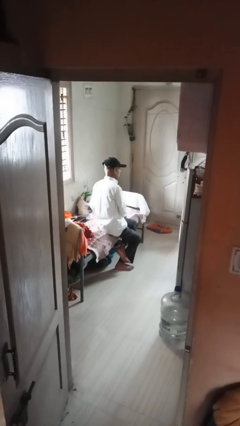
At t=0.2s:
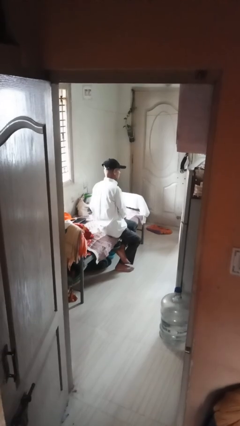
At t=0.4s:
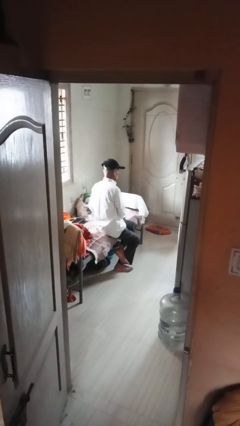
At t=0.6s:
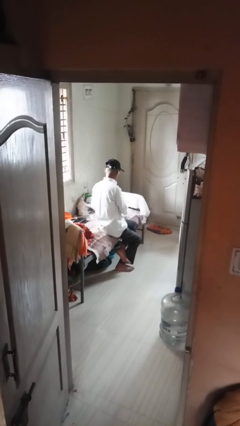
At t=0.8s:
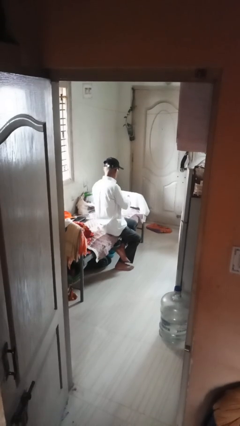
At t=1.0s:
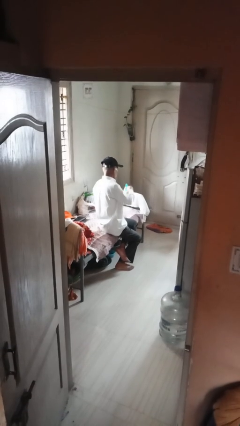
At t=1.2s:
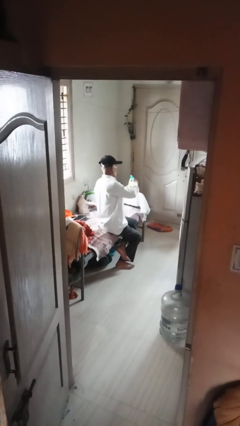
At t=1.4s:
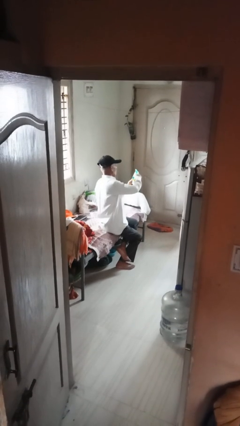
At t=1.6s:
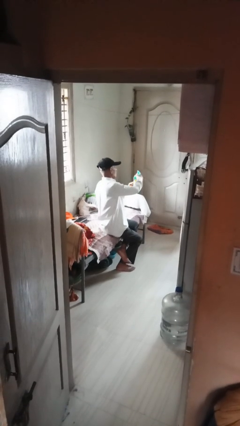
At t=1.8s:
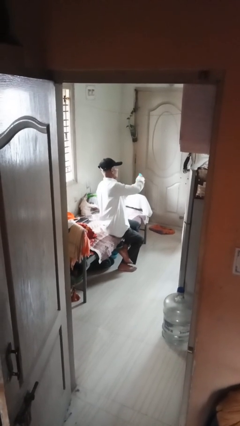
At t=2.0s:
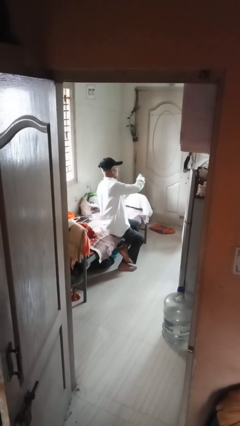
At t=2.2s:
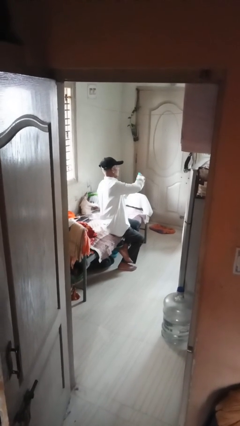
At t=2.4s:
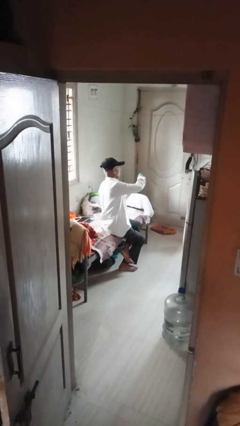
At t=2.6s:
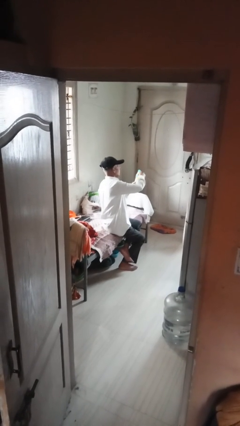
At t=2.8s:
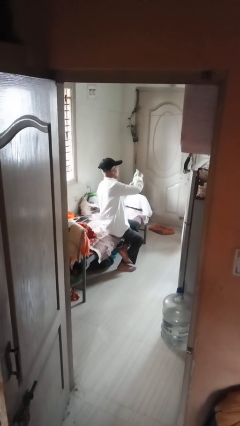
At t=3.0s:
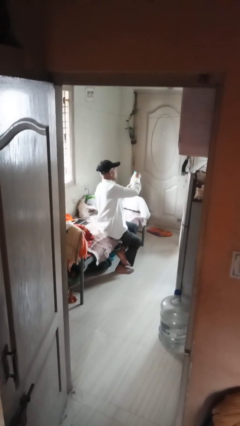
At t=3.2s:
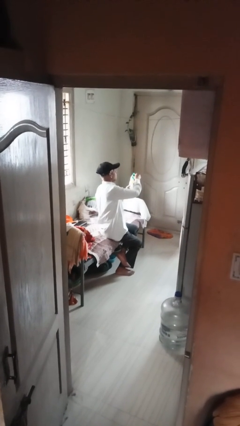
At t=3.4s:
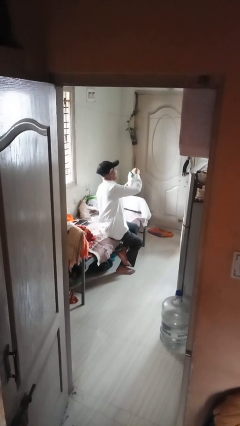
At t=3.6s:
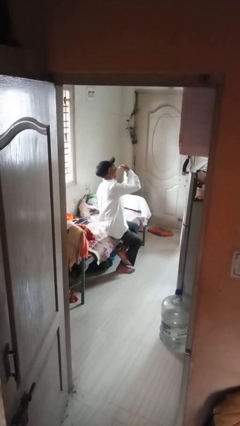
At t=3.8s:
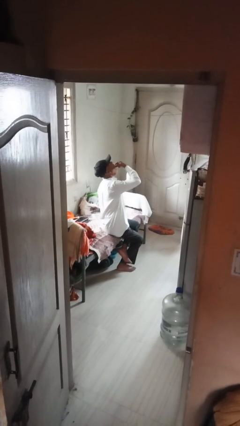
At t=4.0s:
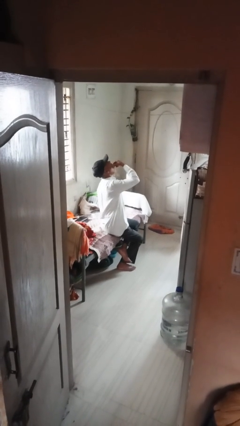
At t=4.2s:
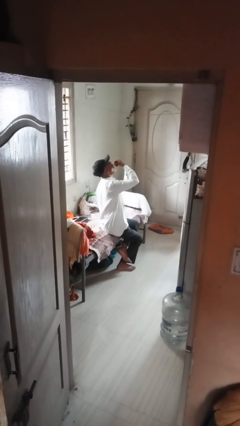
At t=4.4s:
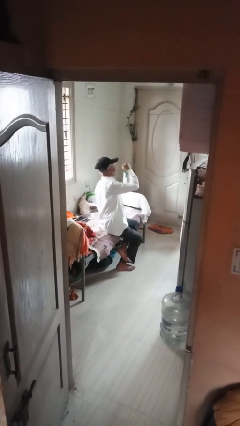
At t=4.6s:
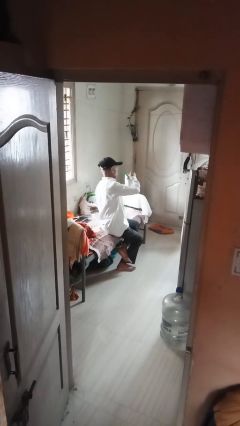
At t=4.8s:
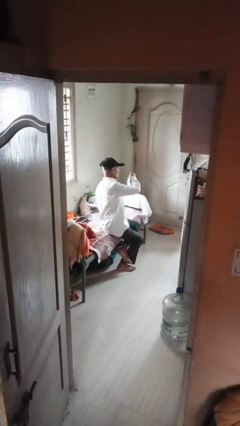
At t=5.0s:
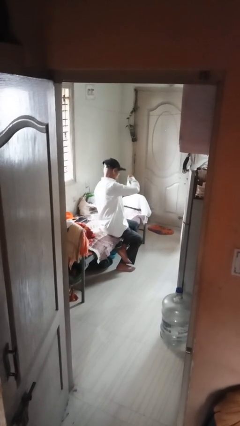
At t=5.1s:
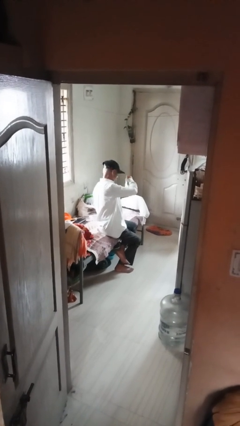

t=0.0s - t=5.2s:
person eats snack from bag

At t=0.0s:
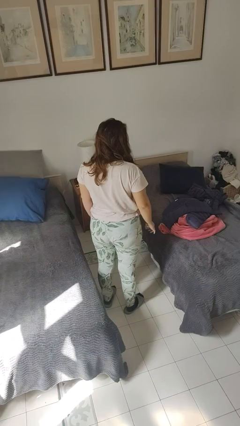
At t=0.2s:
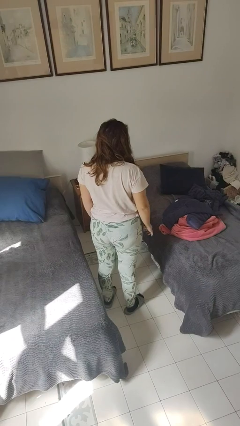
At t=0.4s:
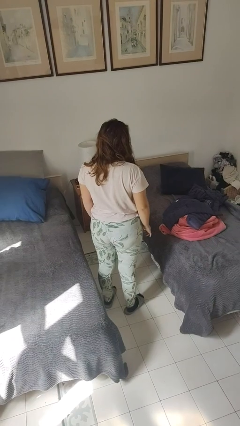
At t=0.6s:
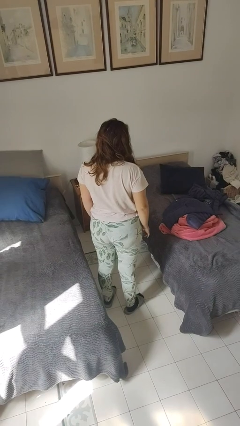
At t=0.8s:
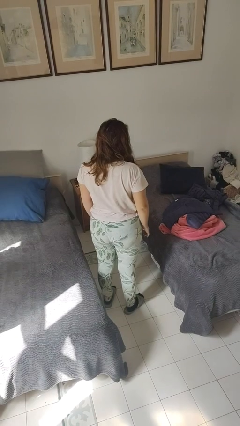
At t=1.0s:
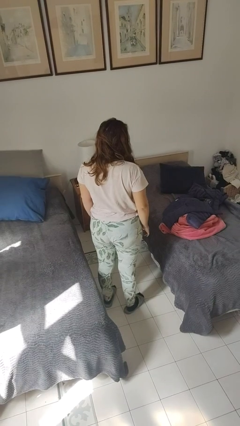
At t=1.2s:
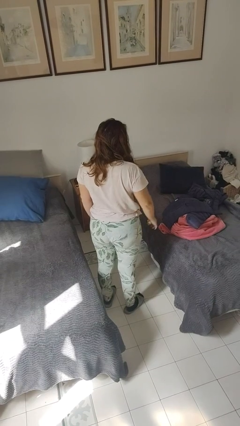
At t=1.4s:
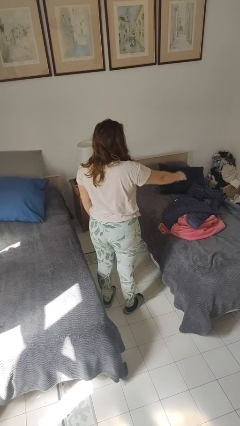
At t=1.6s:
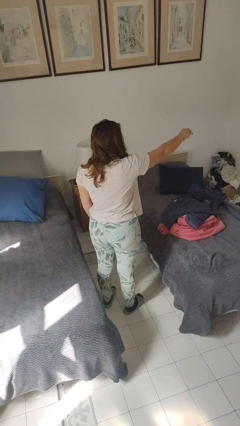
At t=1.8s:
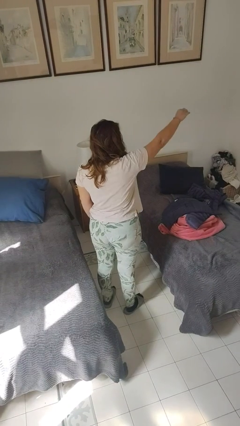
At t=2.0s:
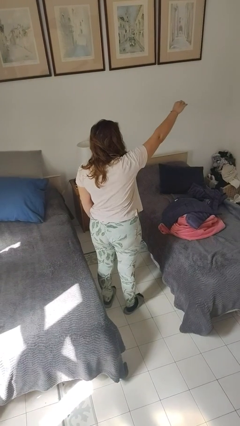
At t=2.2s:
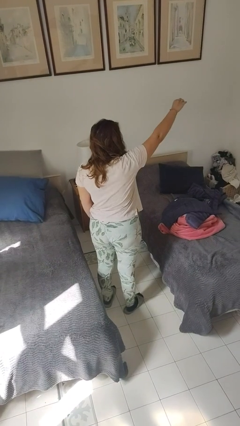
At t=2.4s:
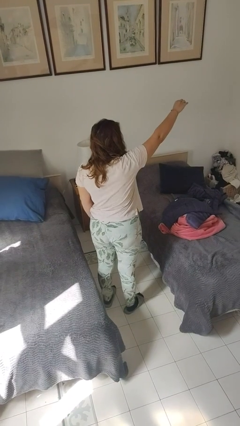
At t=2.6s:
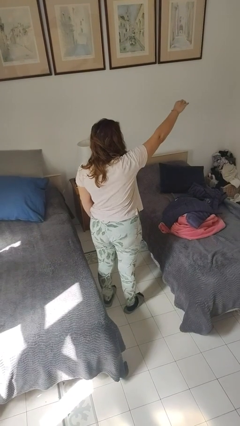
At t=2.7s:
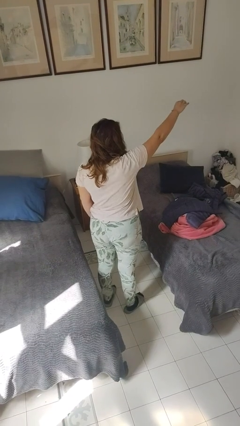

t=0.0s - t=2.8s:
person gestures hang loose

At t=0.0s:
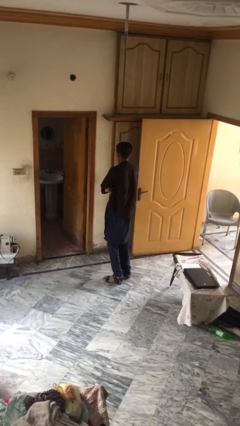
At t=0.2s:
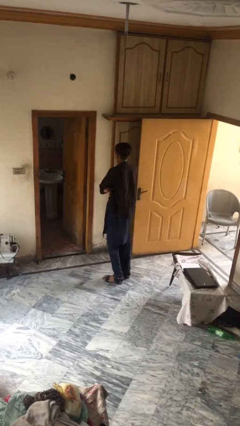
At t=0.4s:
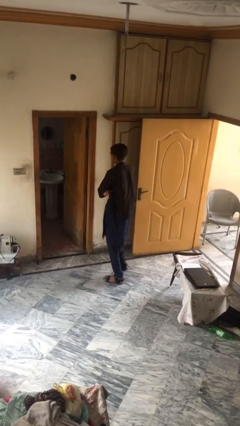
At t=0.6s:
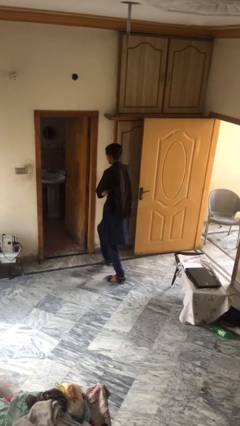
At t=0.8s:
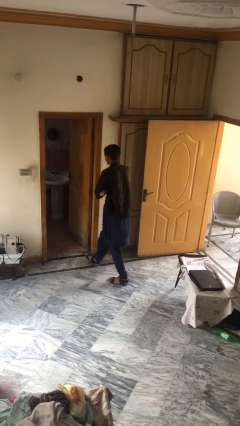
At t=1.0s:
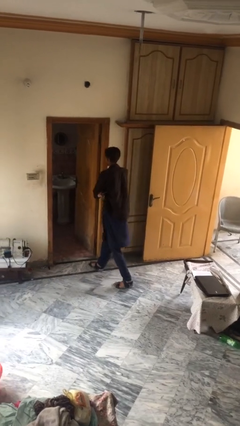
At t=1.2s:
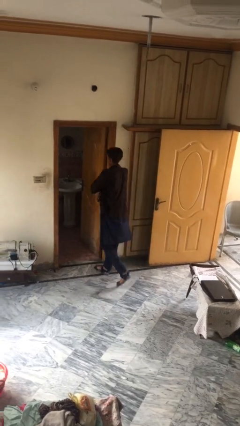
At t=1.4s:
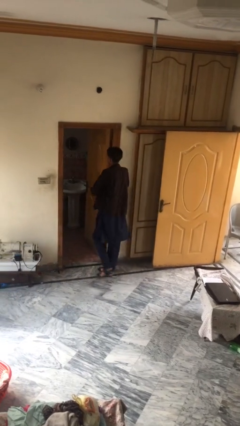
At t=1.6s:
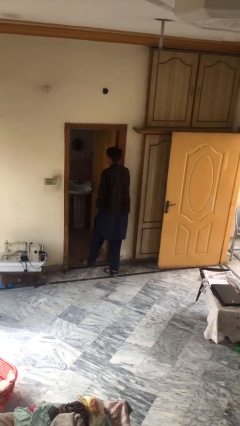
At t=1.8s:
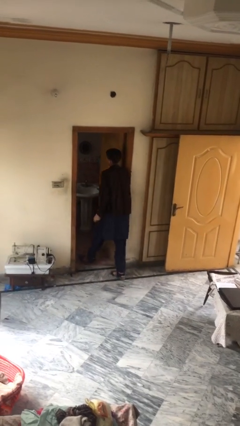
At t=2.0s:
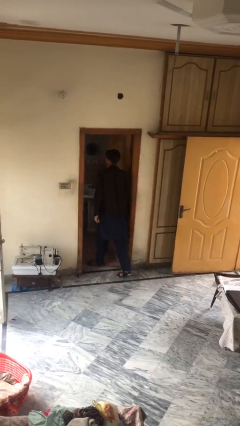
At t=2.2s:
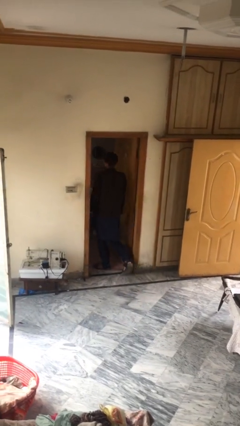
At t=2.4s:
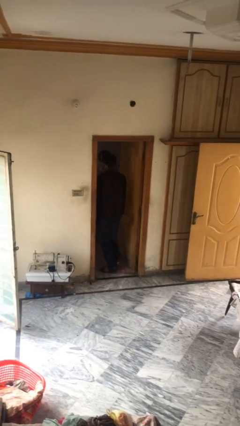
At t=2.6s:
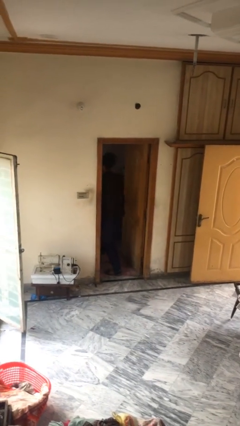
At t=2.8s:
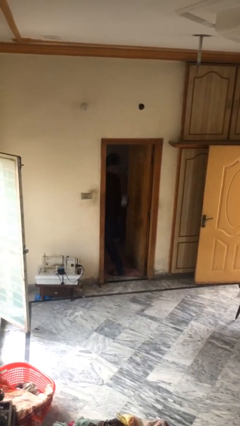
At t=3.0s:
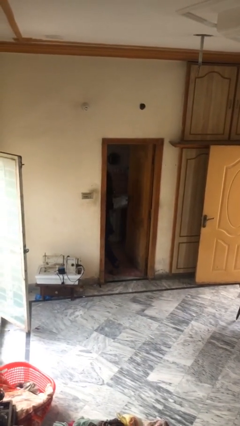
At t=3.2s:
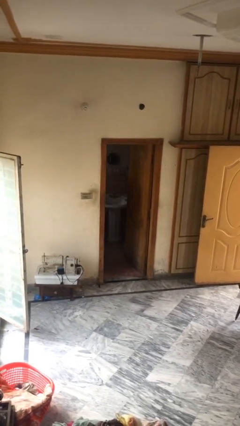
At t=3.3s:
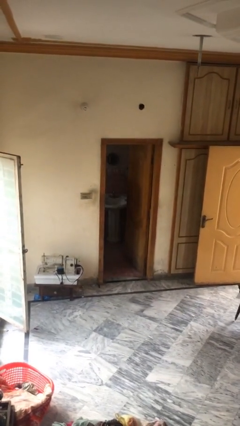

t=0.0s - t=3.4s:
person exits scene through structure

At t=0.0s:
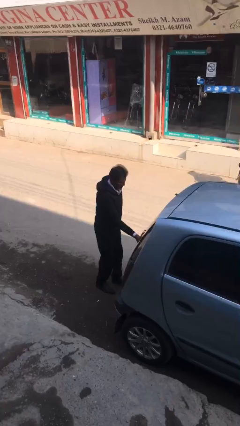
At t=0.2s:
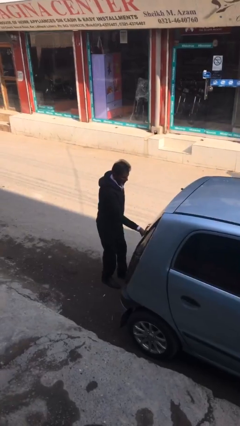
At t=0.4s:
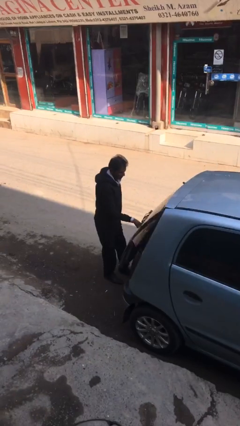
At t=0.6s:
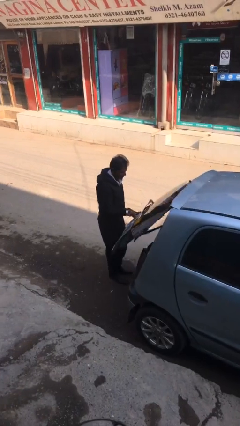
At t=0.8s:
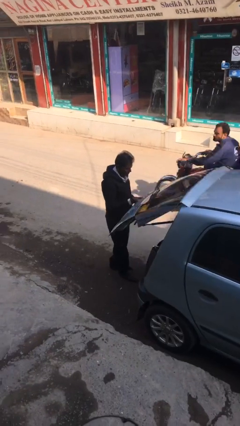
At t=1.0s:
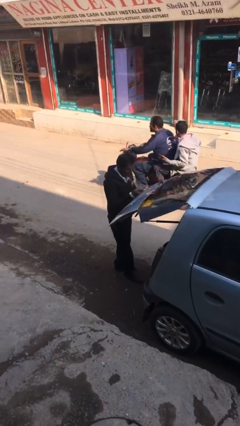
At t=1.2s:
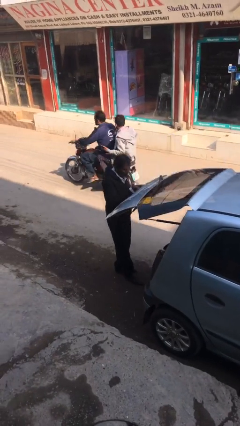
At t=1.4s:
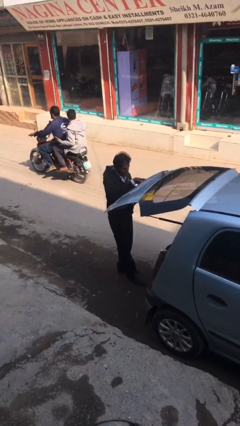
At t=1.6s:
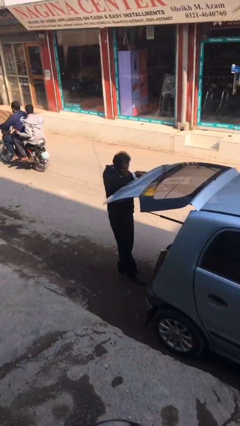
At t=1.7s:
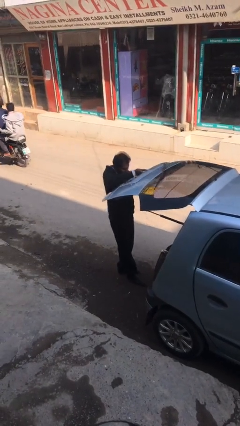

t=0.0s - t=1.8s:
person opens car trunk

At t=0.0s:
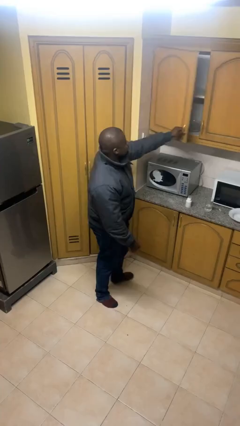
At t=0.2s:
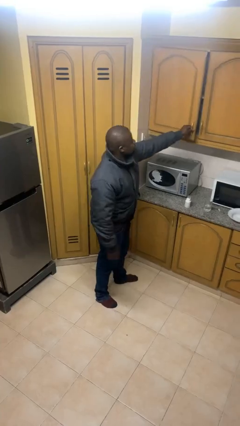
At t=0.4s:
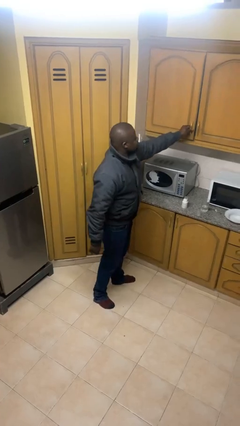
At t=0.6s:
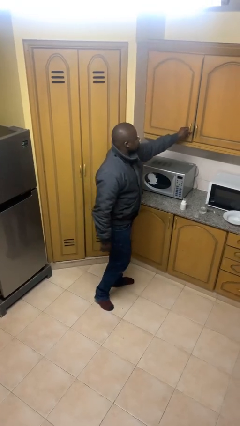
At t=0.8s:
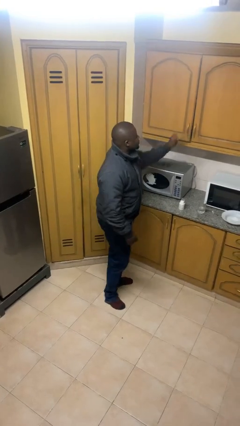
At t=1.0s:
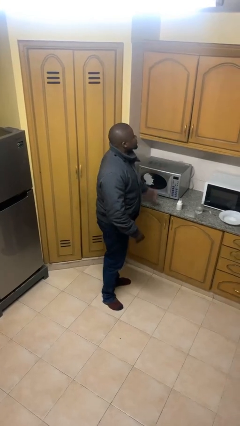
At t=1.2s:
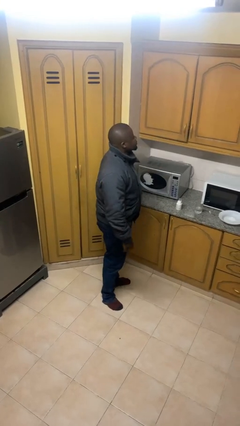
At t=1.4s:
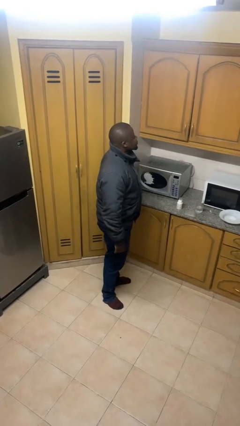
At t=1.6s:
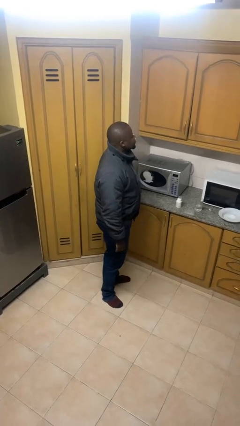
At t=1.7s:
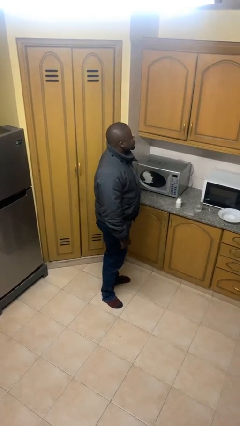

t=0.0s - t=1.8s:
person closes cabinet

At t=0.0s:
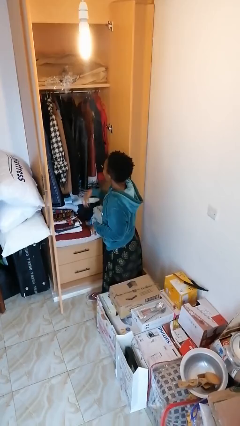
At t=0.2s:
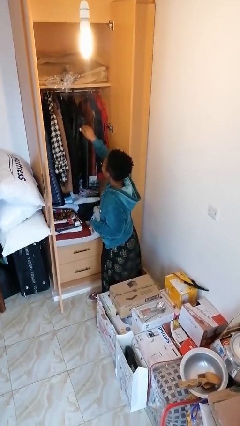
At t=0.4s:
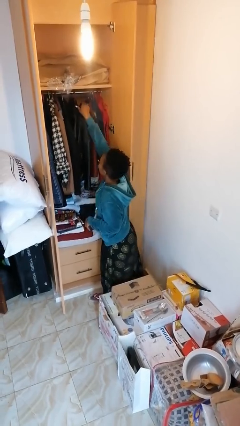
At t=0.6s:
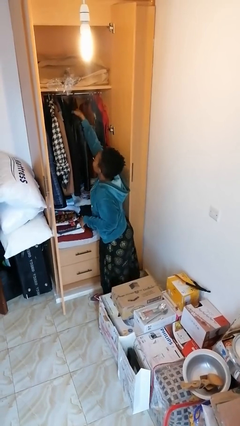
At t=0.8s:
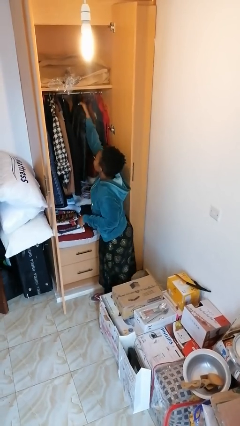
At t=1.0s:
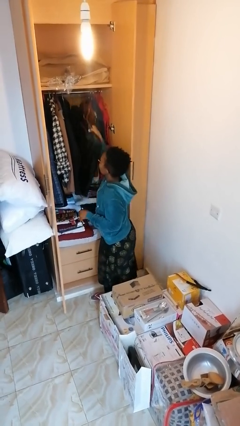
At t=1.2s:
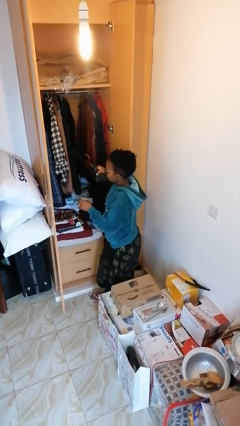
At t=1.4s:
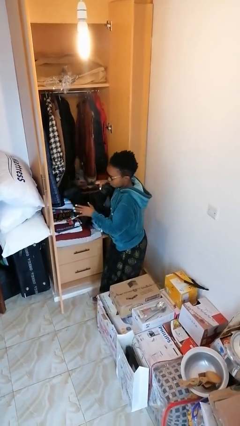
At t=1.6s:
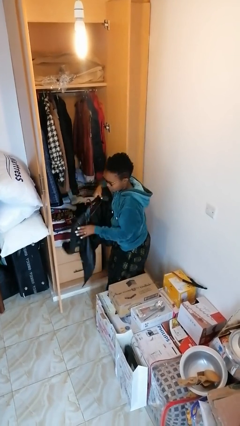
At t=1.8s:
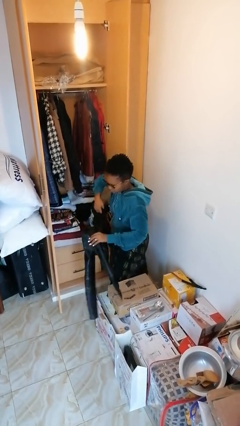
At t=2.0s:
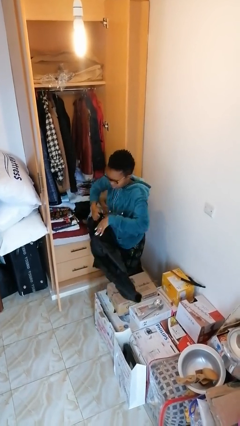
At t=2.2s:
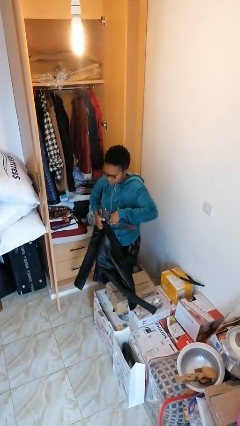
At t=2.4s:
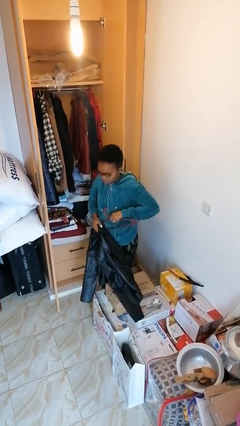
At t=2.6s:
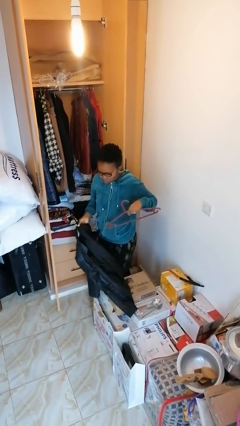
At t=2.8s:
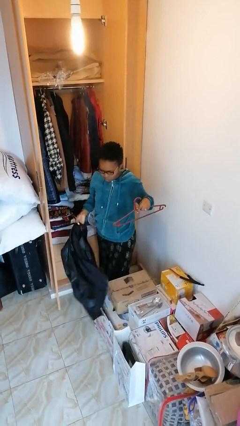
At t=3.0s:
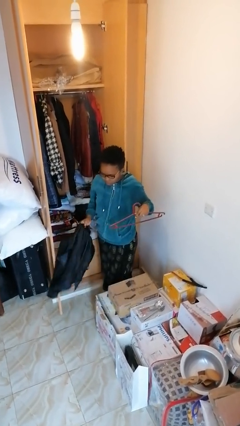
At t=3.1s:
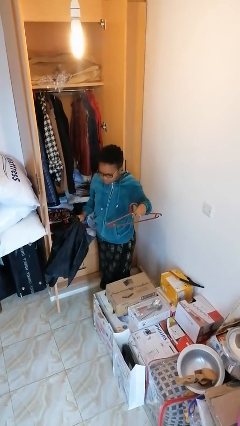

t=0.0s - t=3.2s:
person takes clothes from closet
